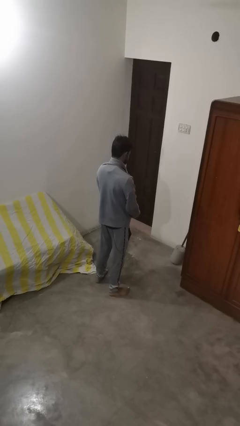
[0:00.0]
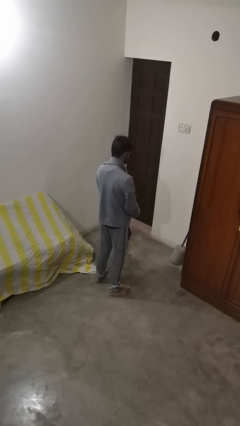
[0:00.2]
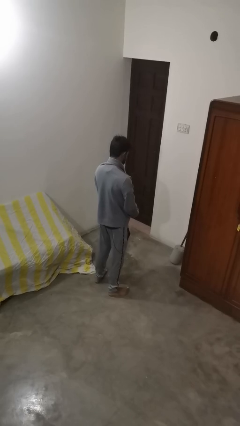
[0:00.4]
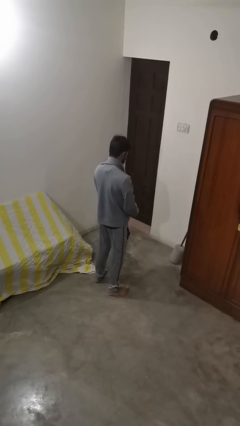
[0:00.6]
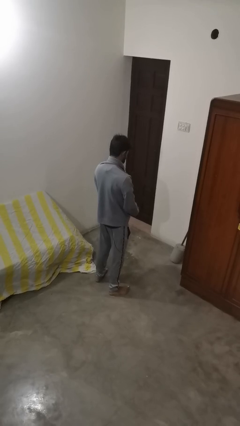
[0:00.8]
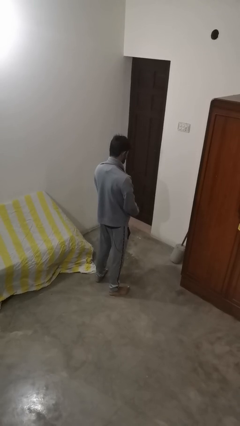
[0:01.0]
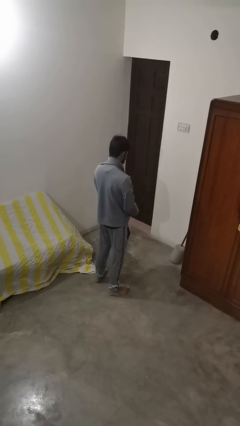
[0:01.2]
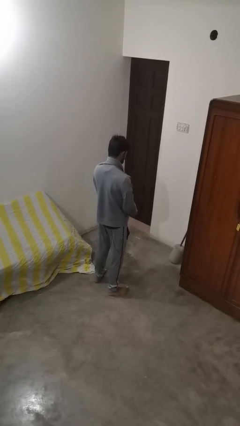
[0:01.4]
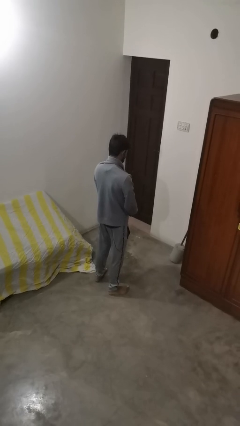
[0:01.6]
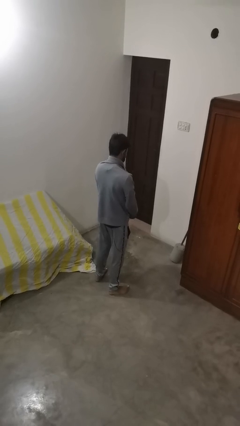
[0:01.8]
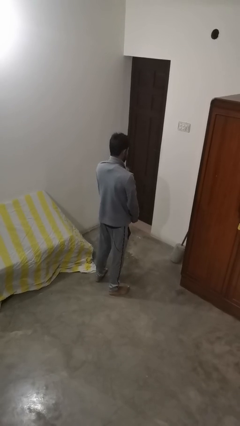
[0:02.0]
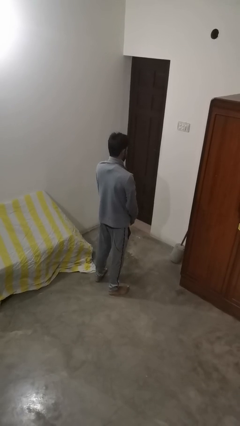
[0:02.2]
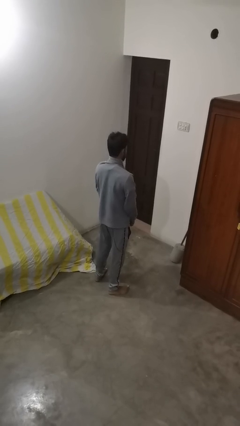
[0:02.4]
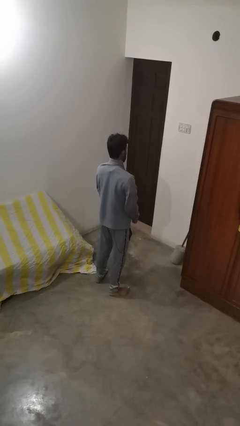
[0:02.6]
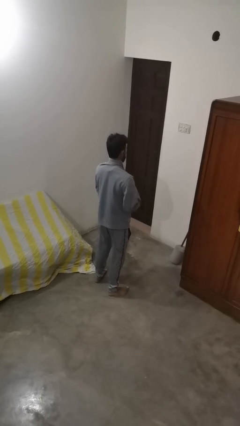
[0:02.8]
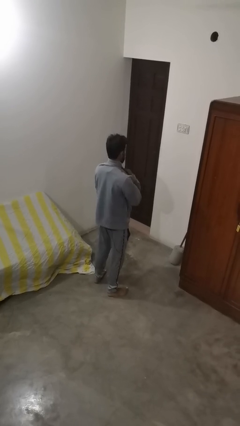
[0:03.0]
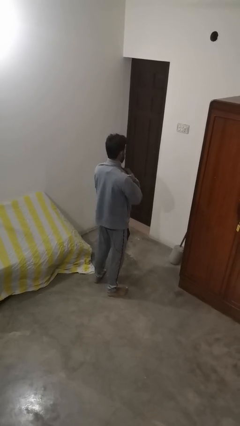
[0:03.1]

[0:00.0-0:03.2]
person zips up jacket

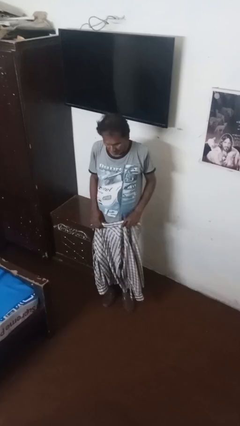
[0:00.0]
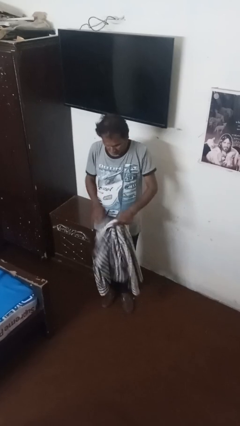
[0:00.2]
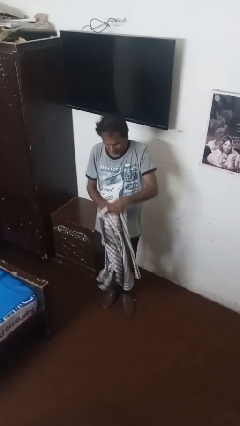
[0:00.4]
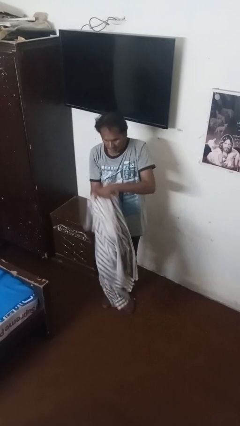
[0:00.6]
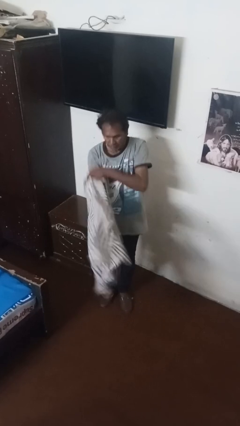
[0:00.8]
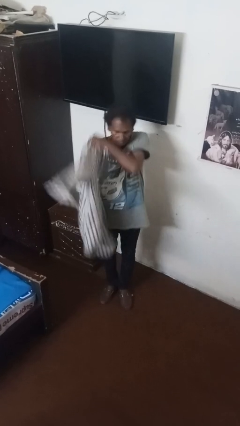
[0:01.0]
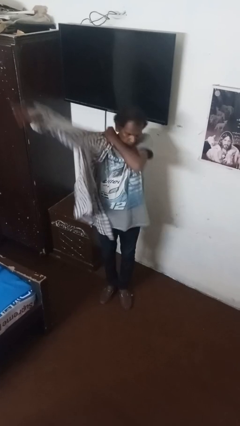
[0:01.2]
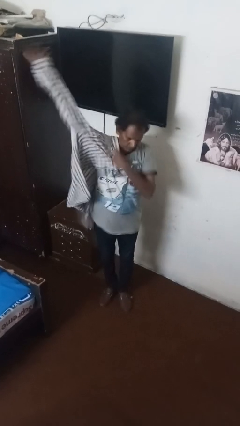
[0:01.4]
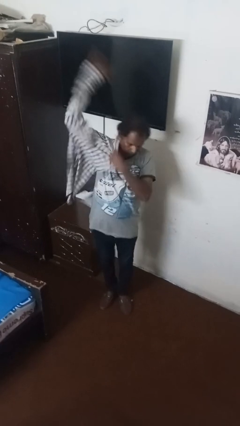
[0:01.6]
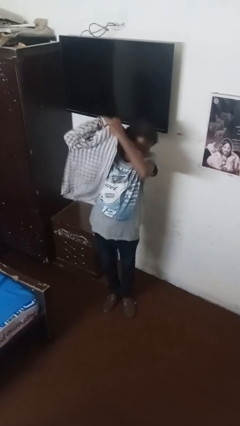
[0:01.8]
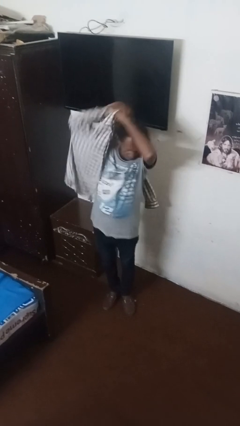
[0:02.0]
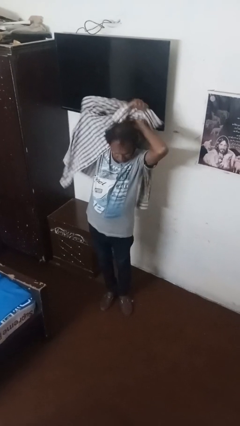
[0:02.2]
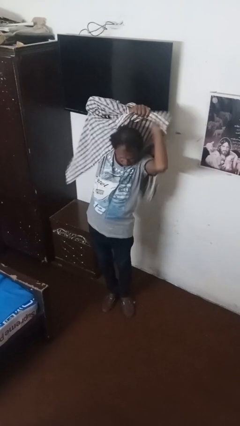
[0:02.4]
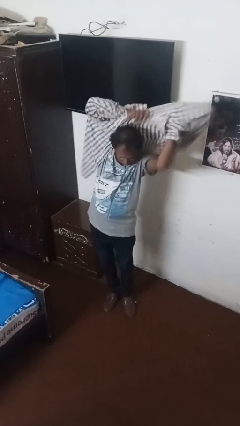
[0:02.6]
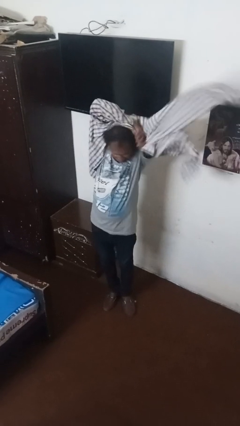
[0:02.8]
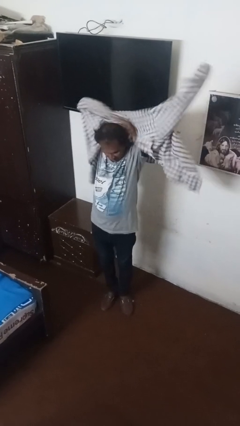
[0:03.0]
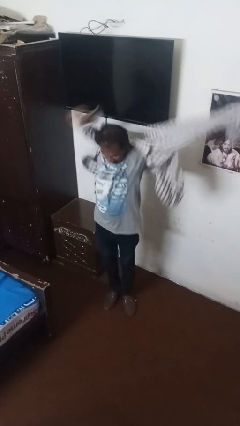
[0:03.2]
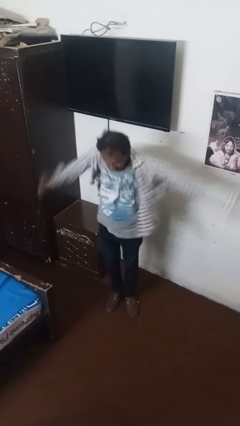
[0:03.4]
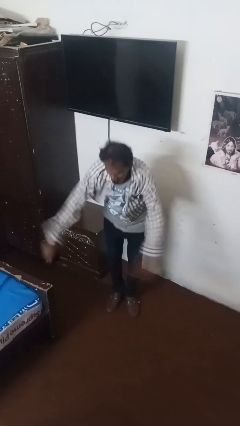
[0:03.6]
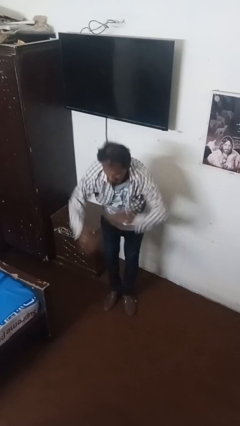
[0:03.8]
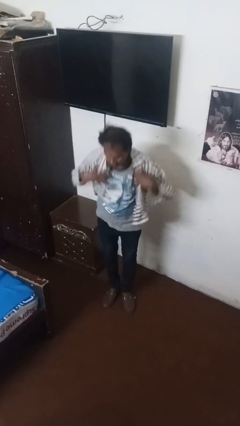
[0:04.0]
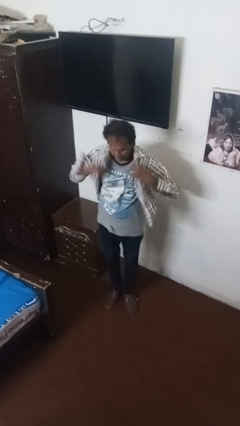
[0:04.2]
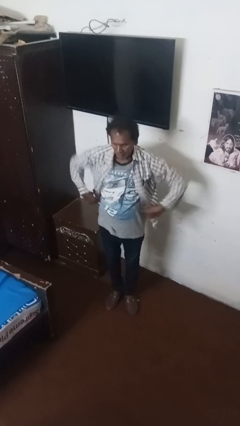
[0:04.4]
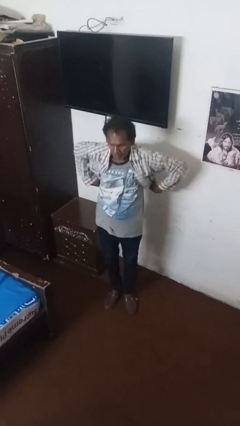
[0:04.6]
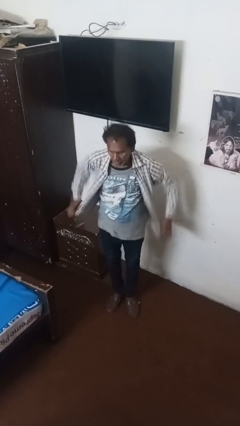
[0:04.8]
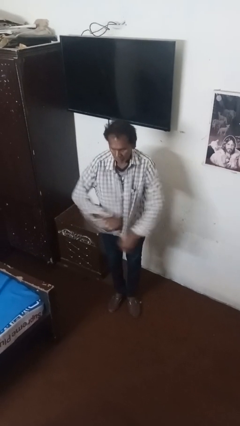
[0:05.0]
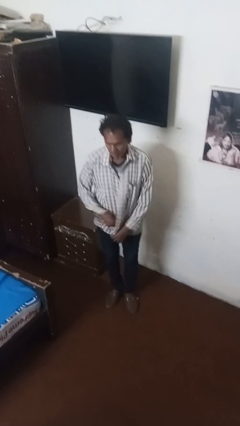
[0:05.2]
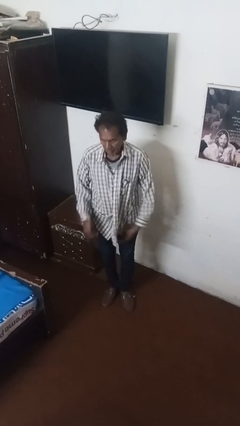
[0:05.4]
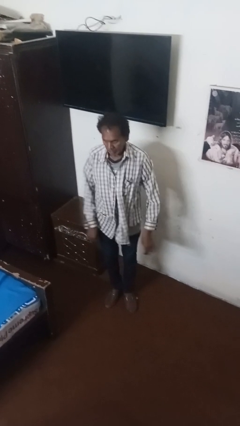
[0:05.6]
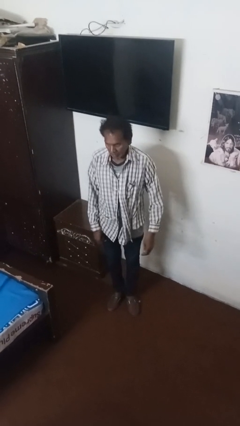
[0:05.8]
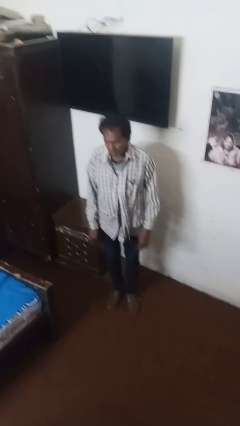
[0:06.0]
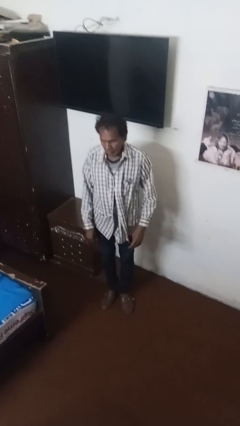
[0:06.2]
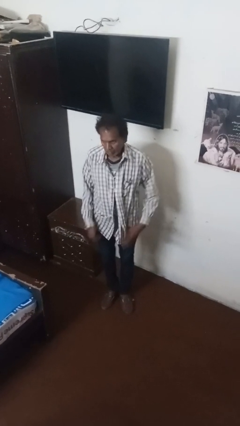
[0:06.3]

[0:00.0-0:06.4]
person puts on shirt

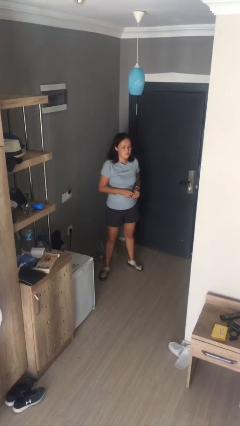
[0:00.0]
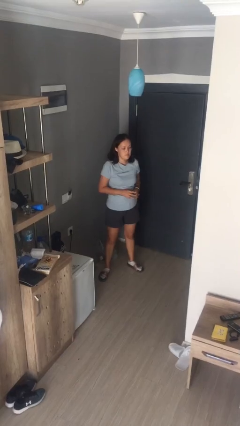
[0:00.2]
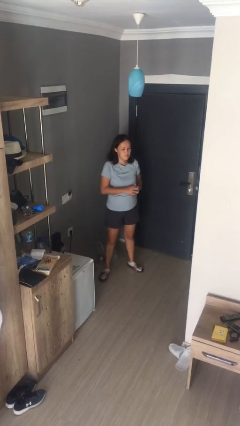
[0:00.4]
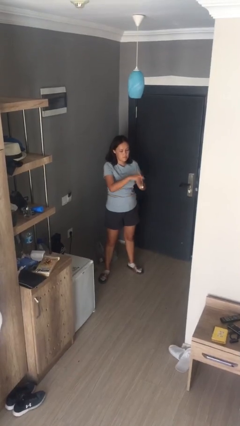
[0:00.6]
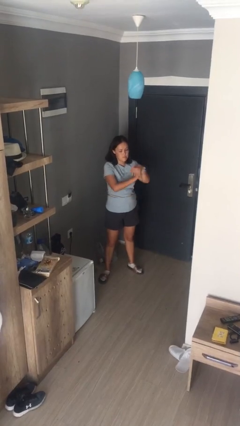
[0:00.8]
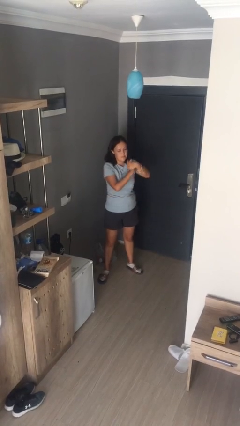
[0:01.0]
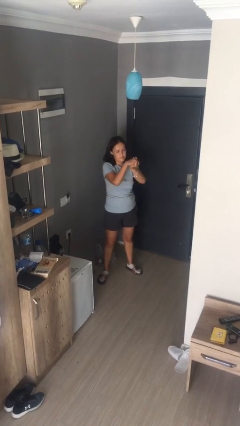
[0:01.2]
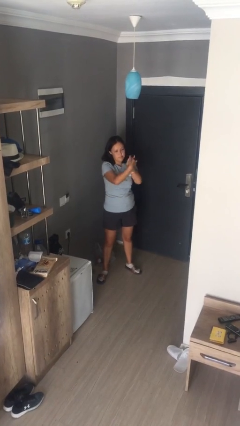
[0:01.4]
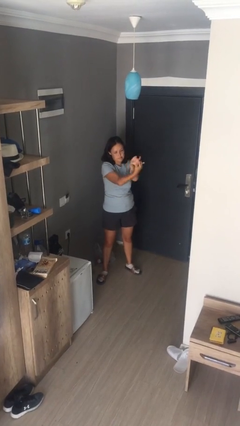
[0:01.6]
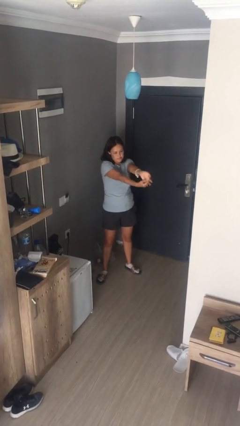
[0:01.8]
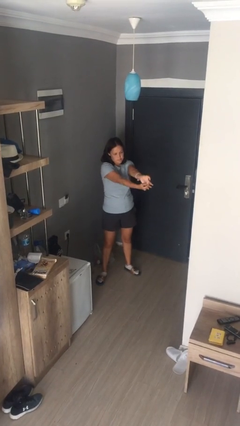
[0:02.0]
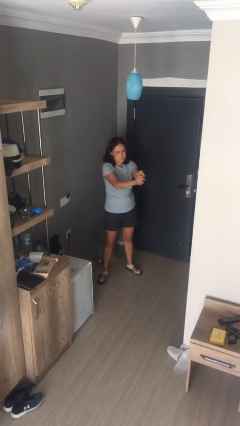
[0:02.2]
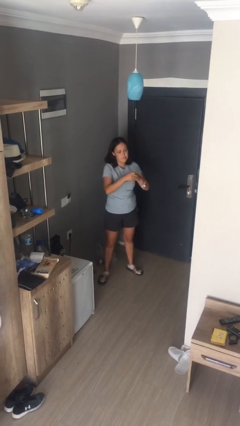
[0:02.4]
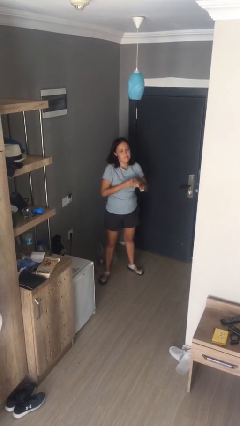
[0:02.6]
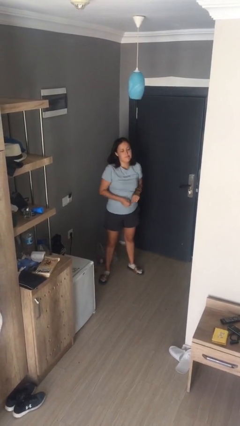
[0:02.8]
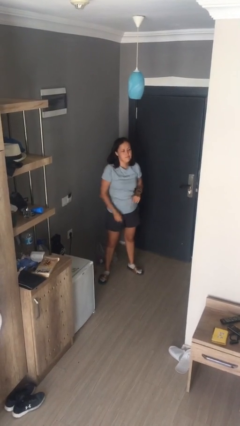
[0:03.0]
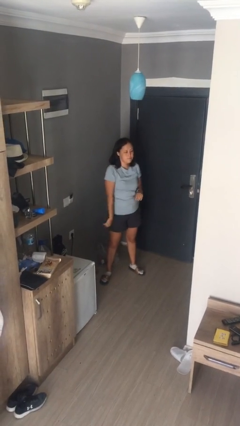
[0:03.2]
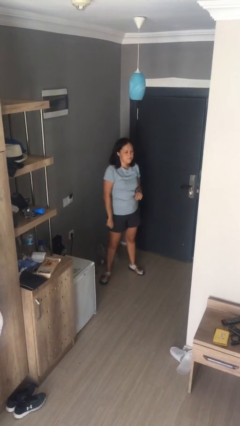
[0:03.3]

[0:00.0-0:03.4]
person cracks knuckles

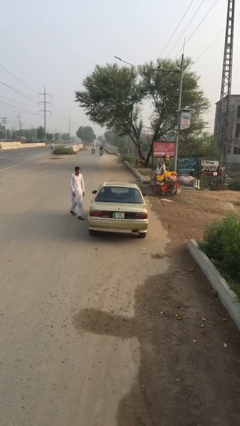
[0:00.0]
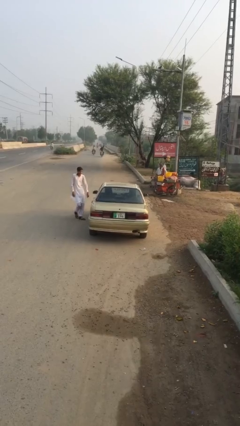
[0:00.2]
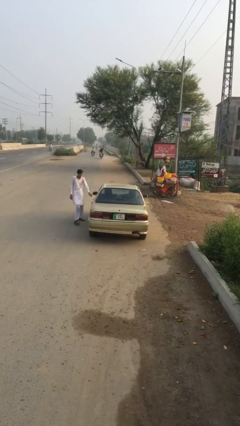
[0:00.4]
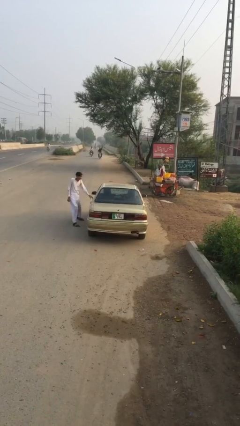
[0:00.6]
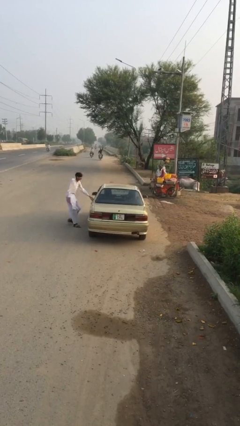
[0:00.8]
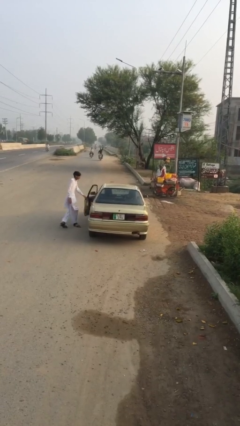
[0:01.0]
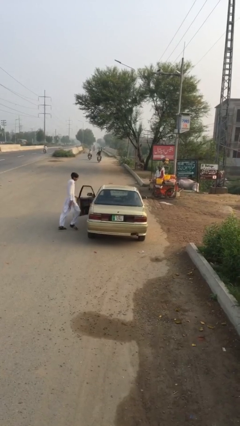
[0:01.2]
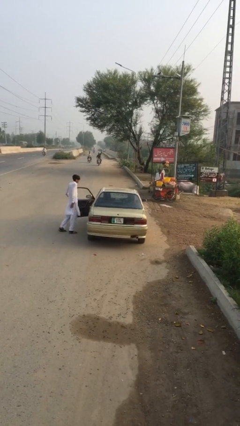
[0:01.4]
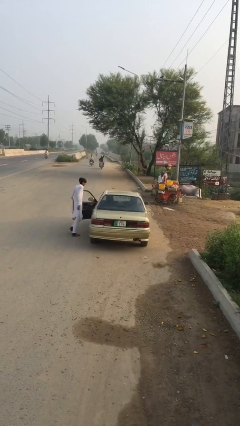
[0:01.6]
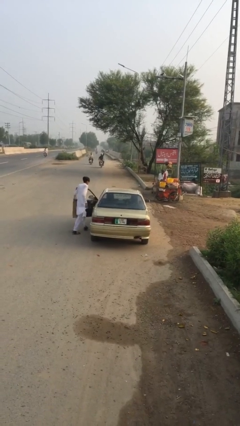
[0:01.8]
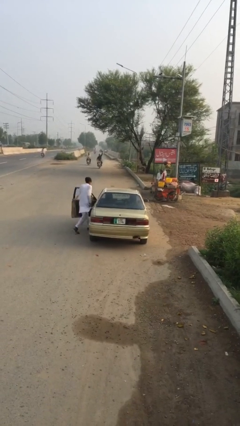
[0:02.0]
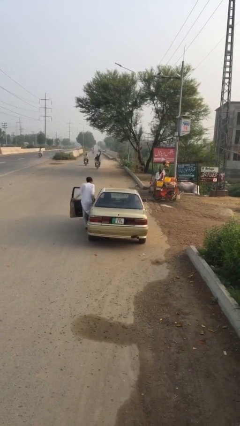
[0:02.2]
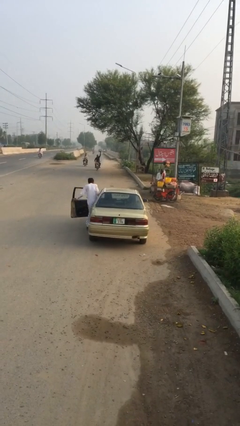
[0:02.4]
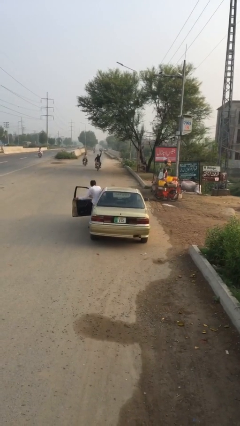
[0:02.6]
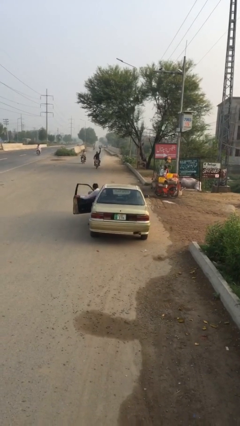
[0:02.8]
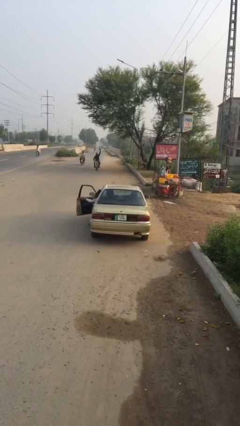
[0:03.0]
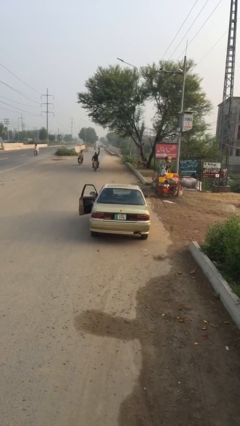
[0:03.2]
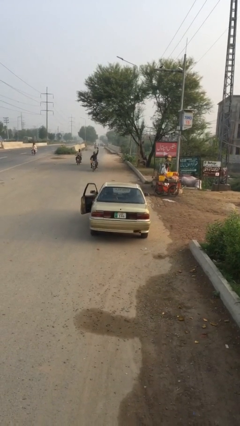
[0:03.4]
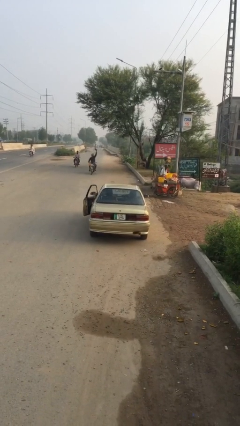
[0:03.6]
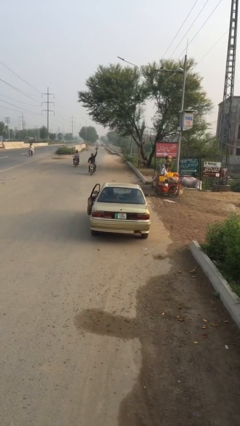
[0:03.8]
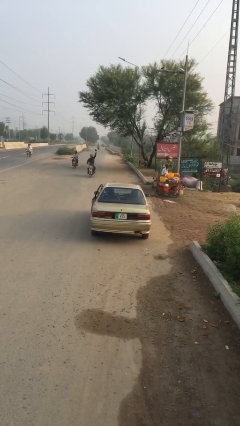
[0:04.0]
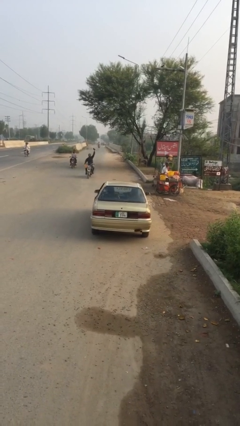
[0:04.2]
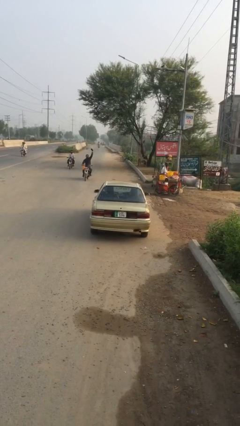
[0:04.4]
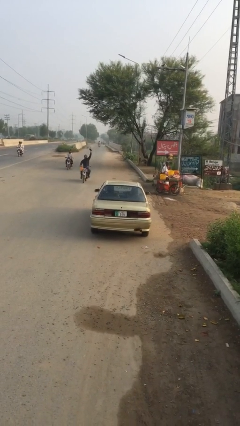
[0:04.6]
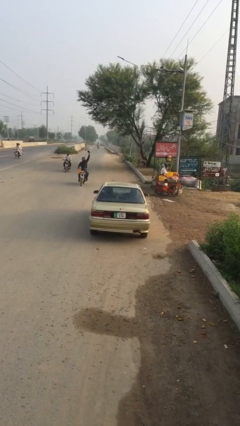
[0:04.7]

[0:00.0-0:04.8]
car picks up person

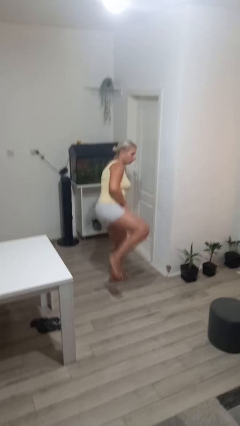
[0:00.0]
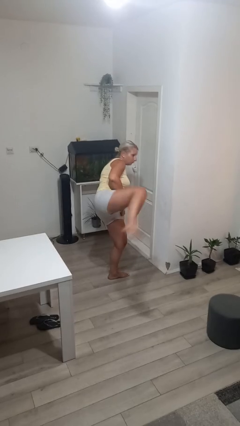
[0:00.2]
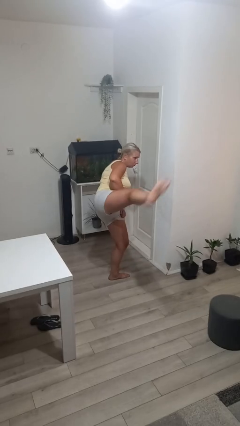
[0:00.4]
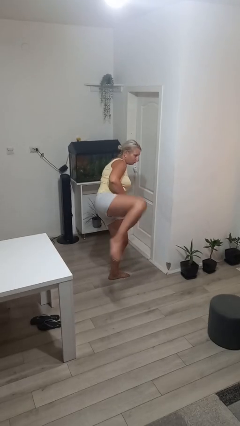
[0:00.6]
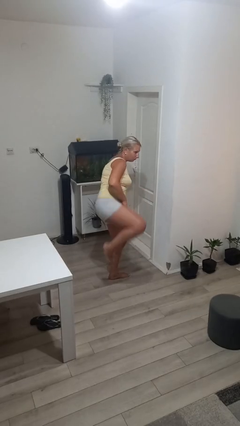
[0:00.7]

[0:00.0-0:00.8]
person karate kicks
